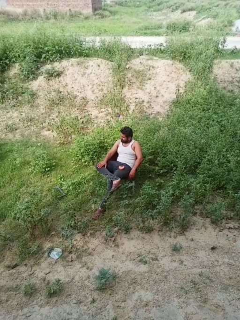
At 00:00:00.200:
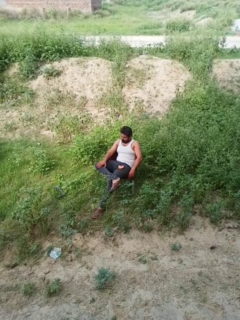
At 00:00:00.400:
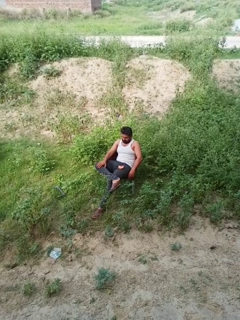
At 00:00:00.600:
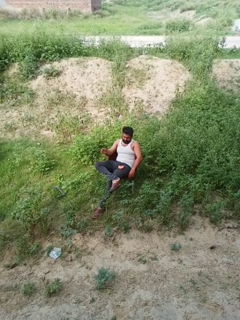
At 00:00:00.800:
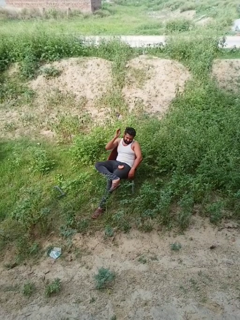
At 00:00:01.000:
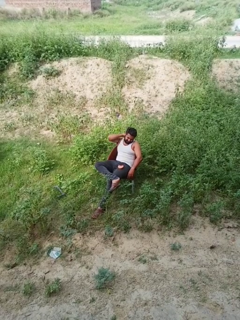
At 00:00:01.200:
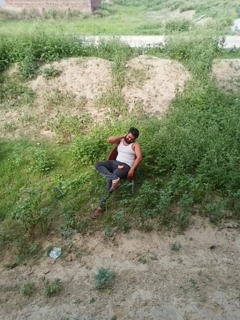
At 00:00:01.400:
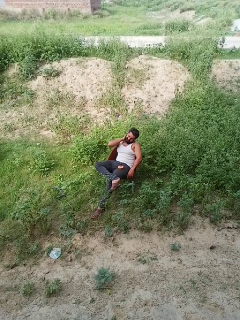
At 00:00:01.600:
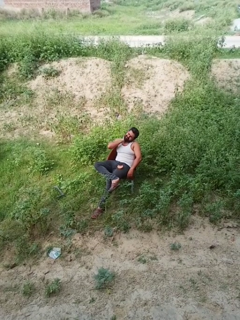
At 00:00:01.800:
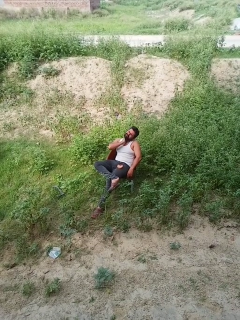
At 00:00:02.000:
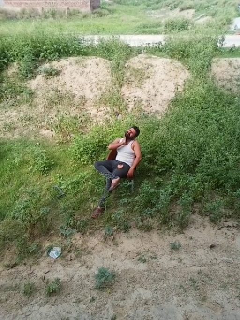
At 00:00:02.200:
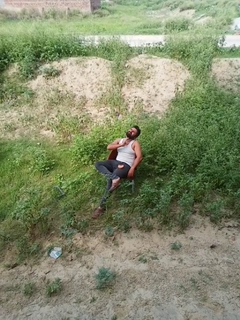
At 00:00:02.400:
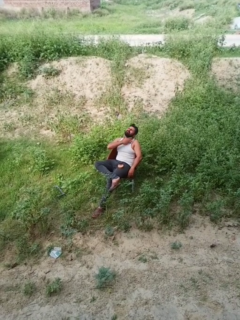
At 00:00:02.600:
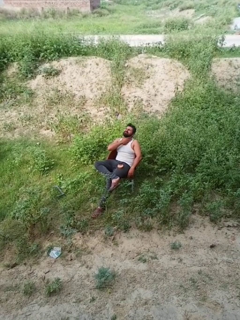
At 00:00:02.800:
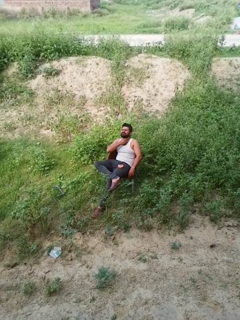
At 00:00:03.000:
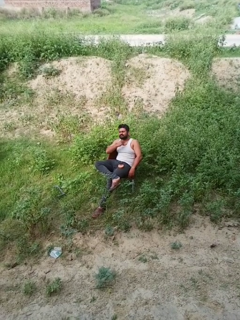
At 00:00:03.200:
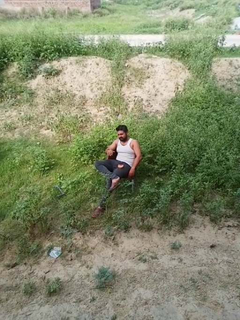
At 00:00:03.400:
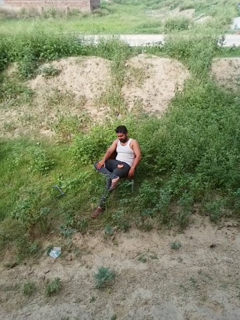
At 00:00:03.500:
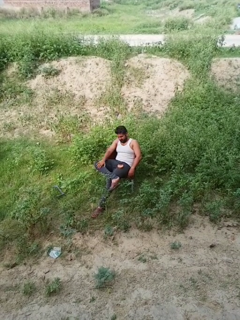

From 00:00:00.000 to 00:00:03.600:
person rubs neck

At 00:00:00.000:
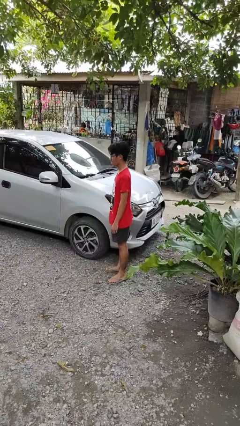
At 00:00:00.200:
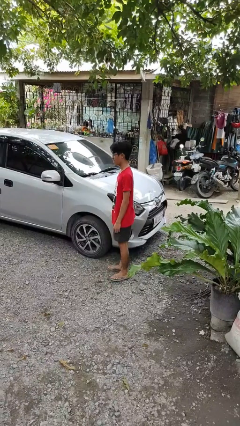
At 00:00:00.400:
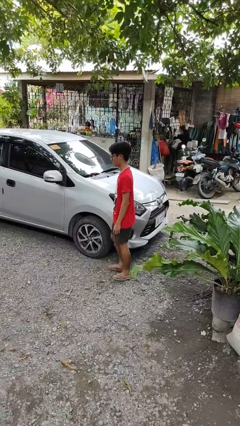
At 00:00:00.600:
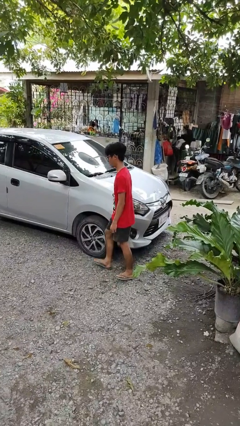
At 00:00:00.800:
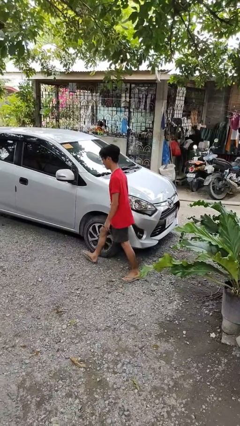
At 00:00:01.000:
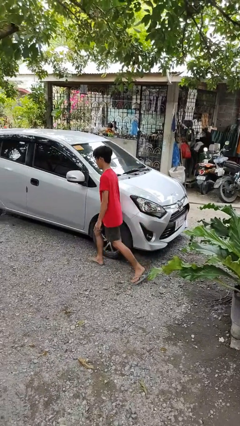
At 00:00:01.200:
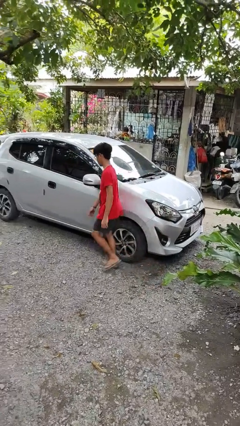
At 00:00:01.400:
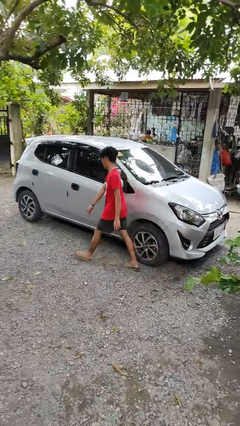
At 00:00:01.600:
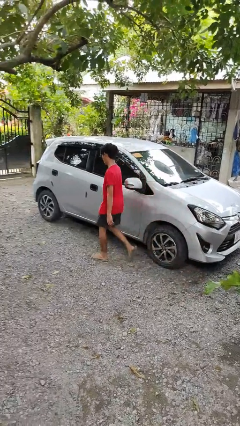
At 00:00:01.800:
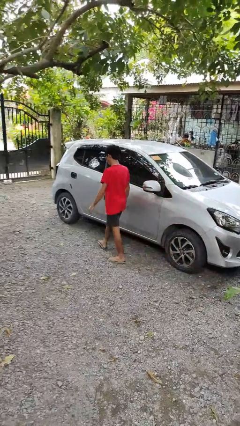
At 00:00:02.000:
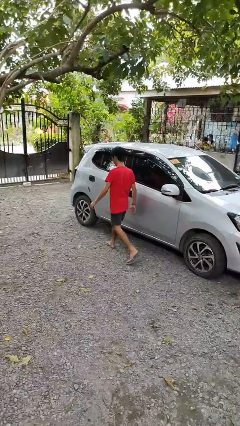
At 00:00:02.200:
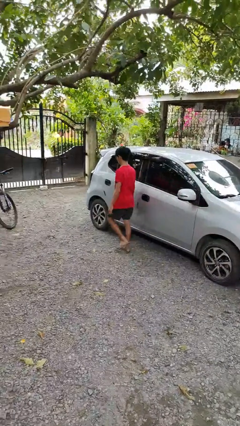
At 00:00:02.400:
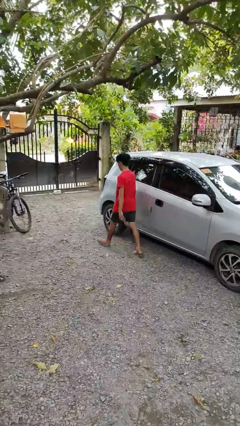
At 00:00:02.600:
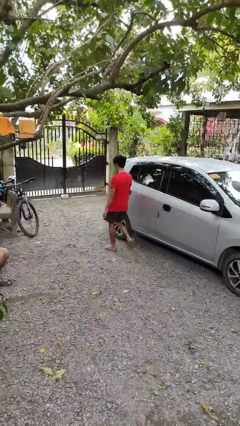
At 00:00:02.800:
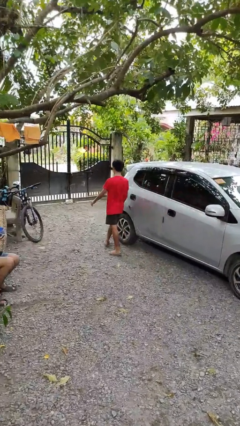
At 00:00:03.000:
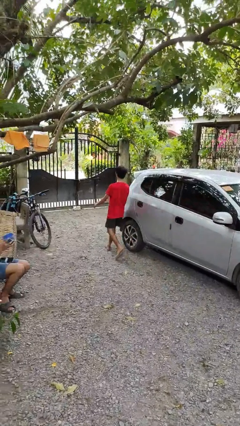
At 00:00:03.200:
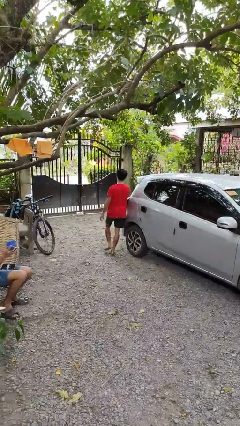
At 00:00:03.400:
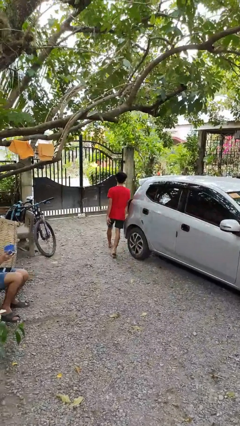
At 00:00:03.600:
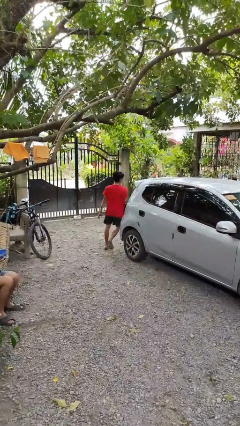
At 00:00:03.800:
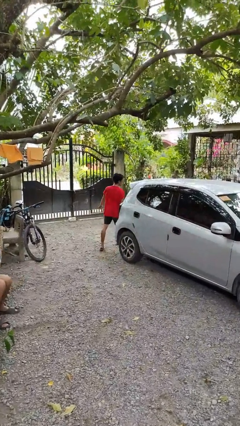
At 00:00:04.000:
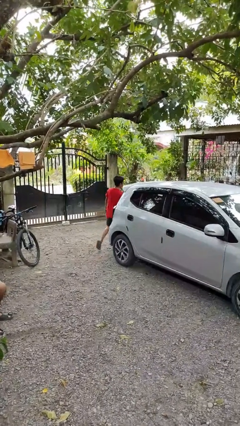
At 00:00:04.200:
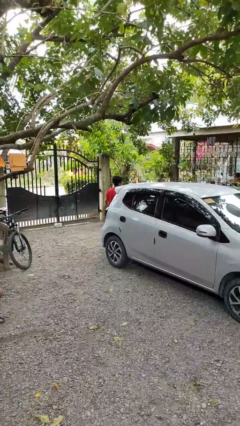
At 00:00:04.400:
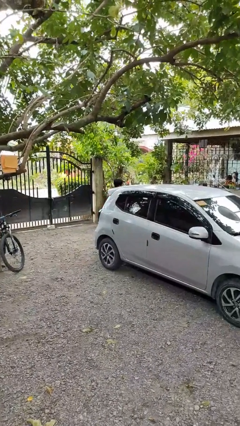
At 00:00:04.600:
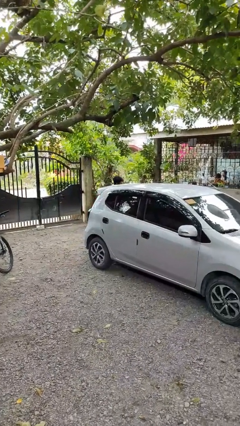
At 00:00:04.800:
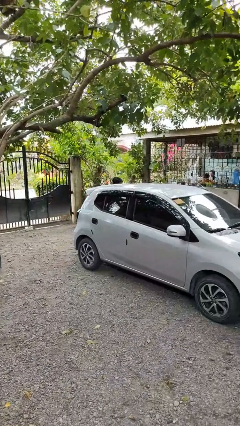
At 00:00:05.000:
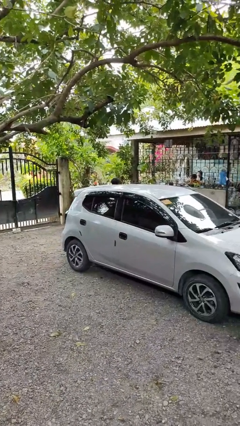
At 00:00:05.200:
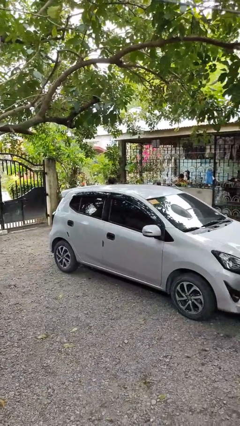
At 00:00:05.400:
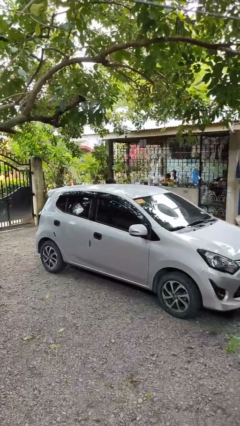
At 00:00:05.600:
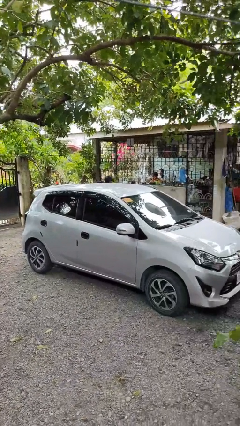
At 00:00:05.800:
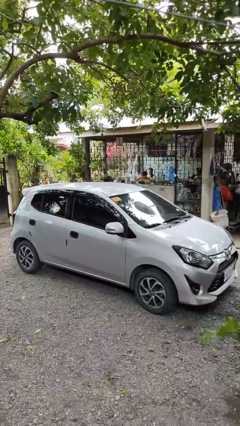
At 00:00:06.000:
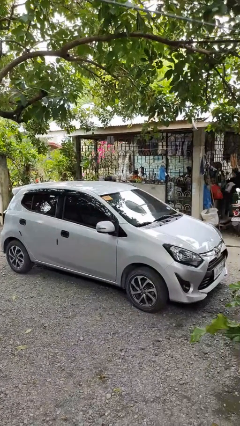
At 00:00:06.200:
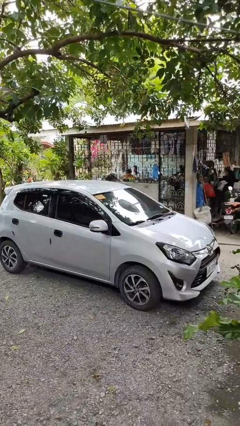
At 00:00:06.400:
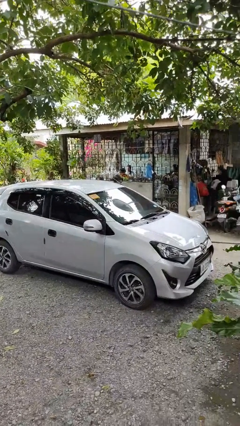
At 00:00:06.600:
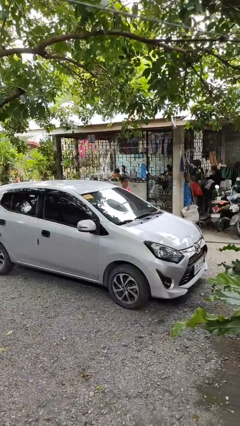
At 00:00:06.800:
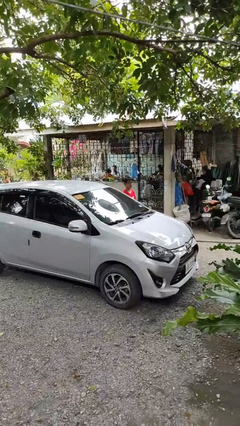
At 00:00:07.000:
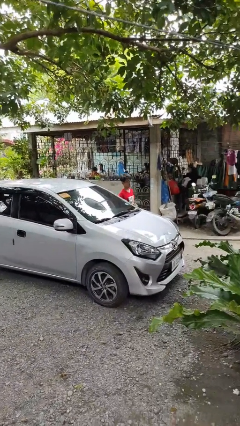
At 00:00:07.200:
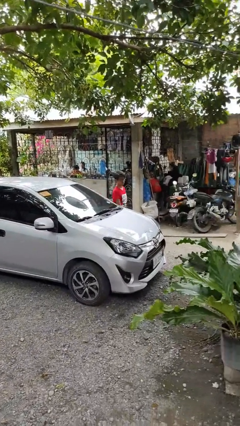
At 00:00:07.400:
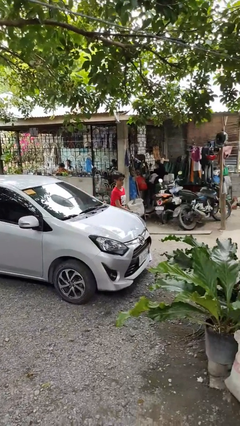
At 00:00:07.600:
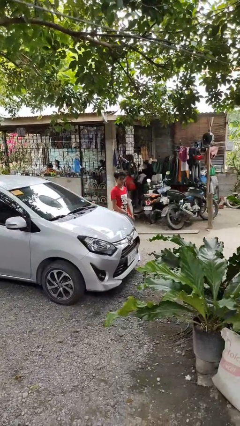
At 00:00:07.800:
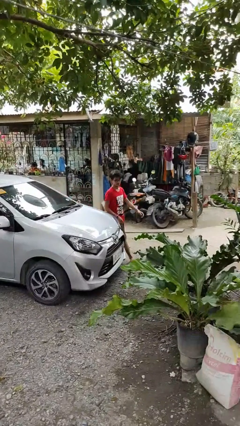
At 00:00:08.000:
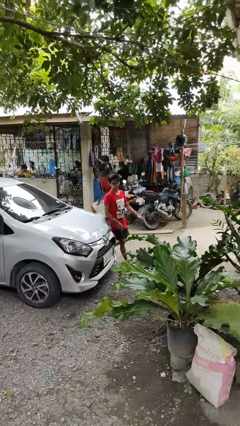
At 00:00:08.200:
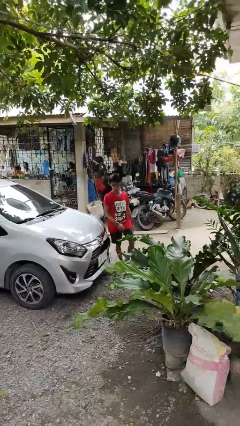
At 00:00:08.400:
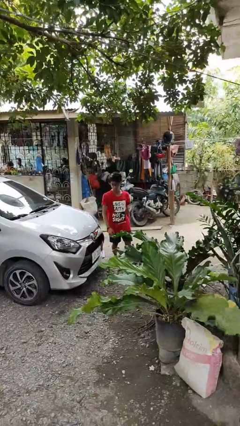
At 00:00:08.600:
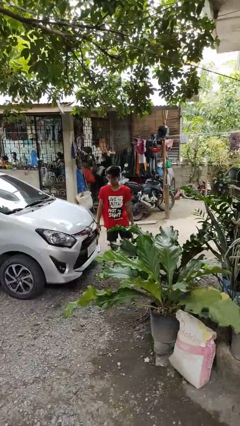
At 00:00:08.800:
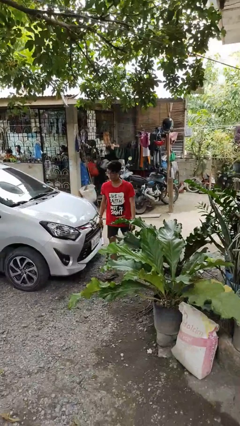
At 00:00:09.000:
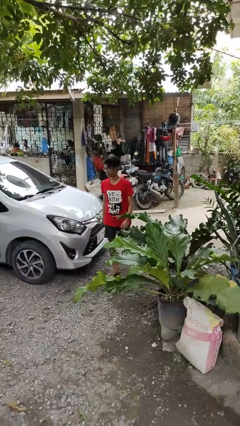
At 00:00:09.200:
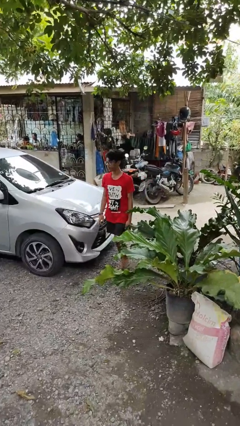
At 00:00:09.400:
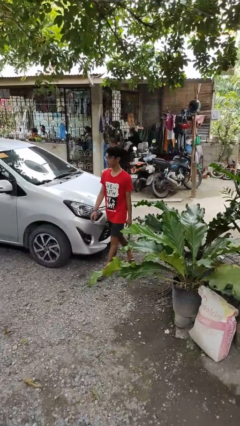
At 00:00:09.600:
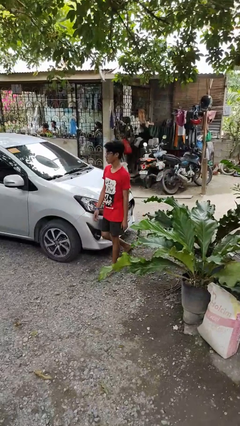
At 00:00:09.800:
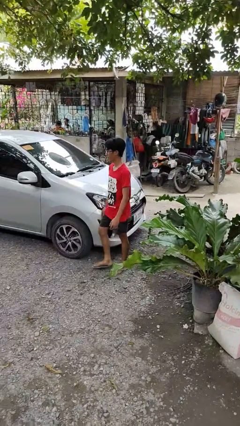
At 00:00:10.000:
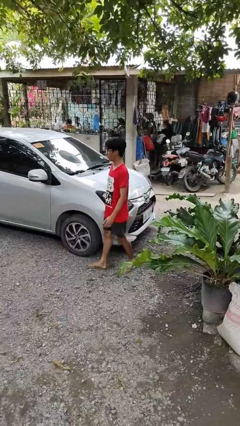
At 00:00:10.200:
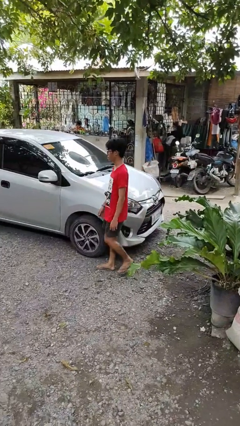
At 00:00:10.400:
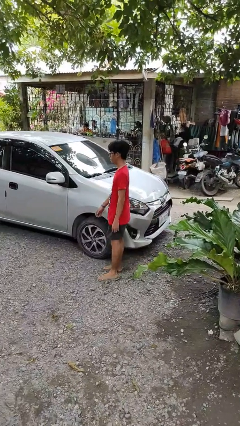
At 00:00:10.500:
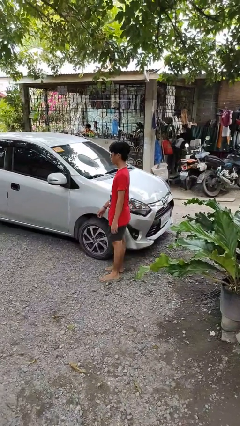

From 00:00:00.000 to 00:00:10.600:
person walks around car

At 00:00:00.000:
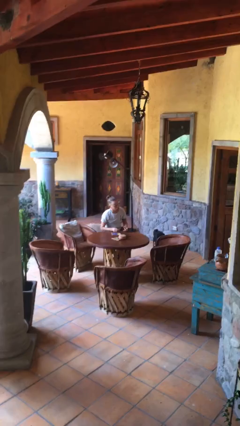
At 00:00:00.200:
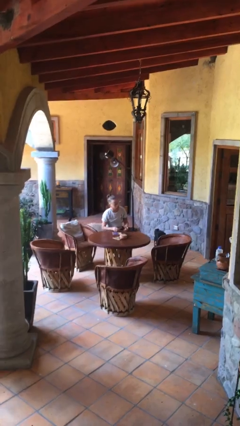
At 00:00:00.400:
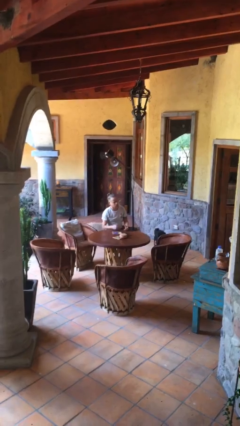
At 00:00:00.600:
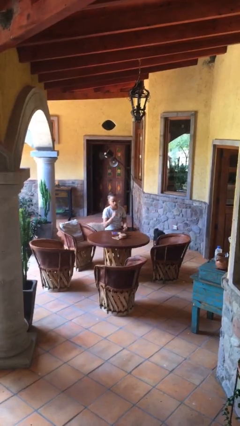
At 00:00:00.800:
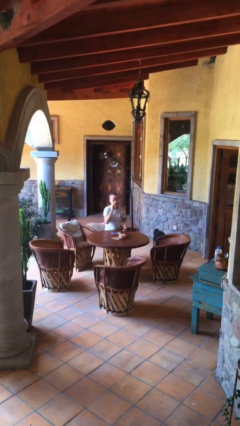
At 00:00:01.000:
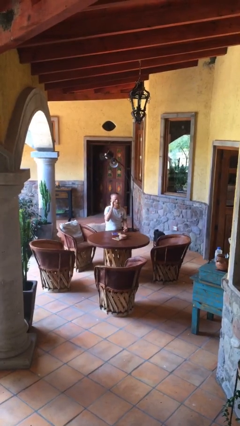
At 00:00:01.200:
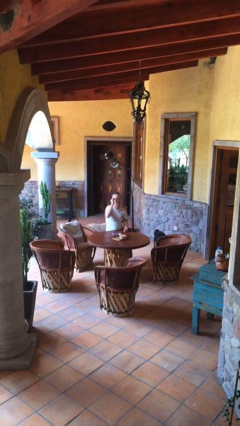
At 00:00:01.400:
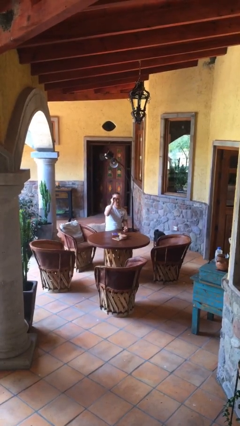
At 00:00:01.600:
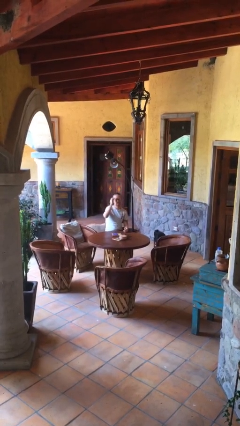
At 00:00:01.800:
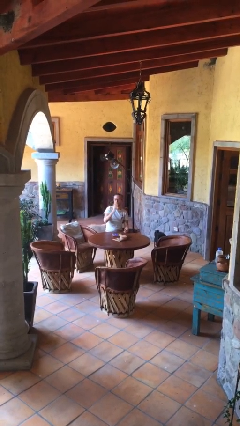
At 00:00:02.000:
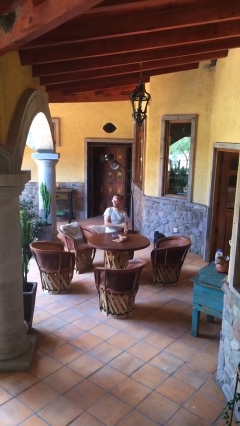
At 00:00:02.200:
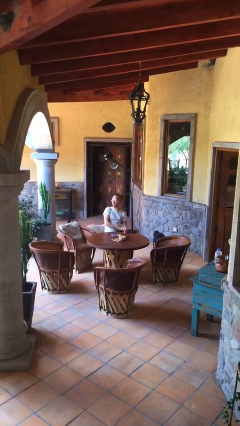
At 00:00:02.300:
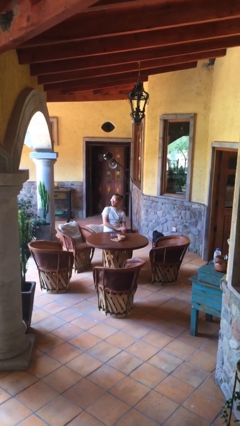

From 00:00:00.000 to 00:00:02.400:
person puts on glasses
